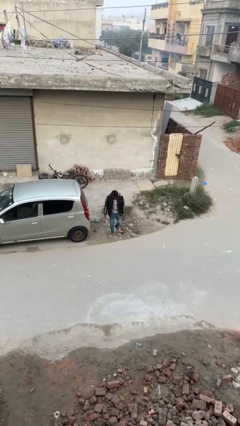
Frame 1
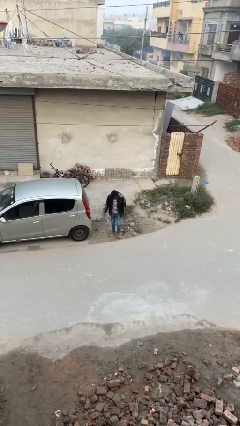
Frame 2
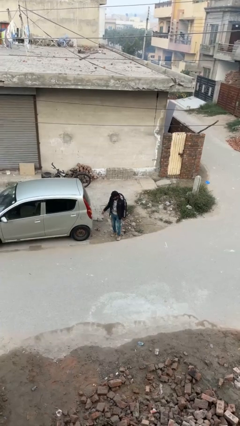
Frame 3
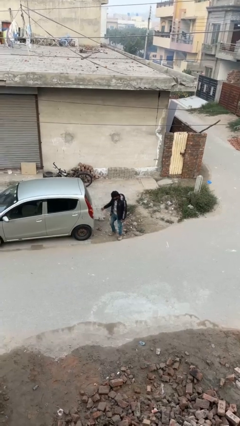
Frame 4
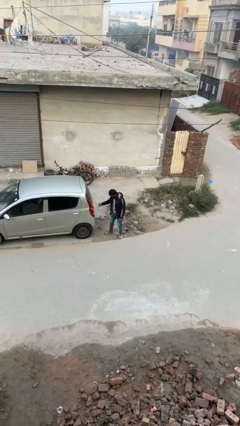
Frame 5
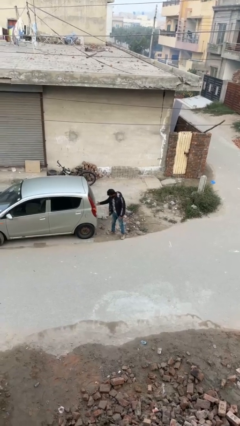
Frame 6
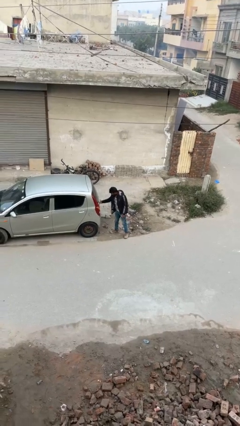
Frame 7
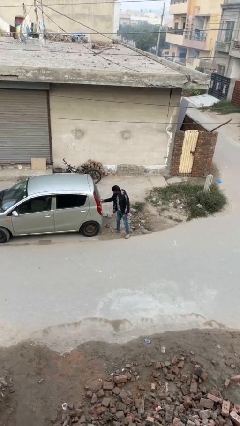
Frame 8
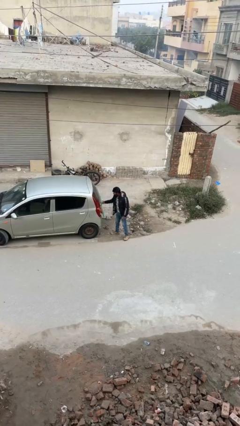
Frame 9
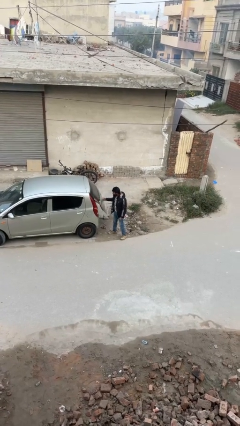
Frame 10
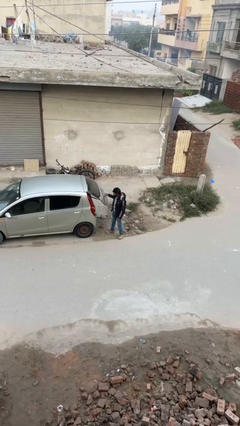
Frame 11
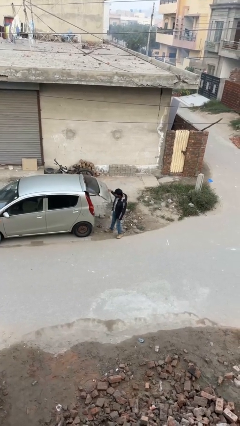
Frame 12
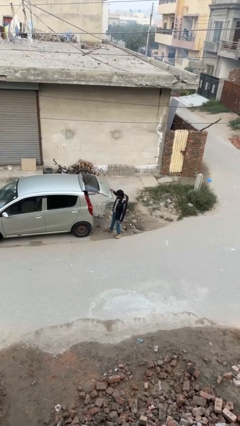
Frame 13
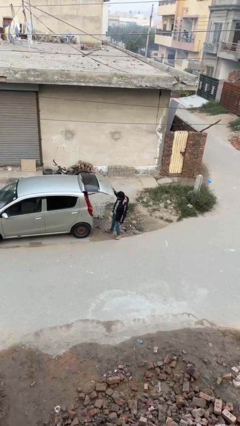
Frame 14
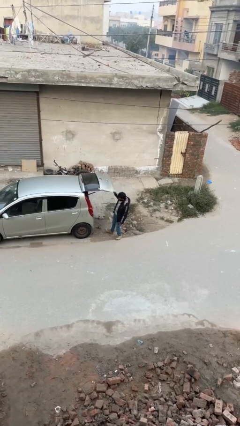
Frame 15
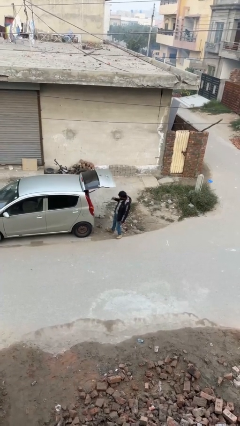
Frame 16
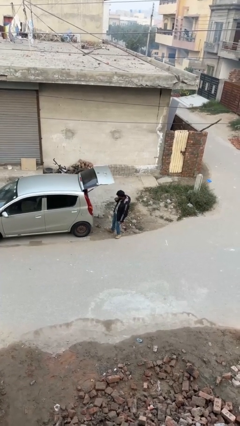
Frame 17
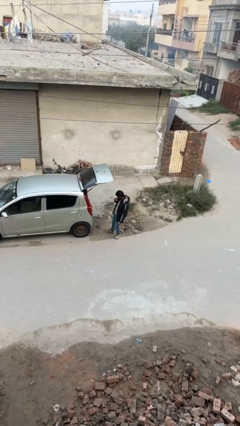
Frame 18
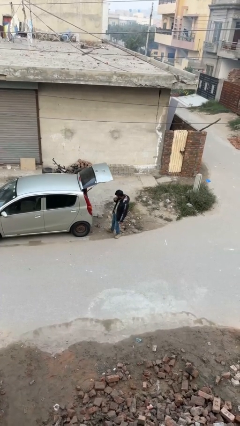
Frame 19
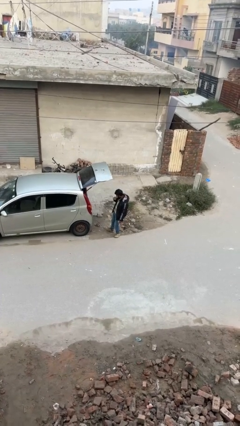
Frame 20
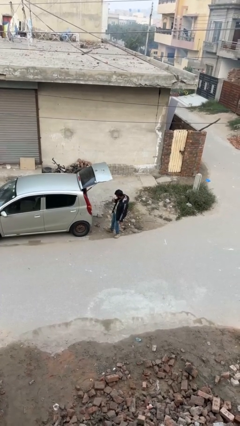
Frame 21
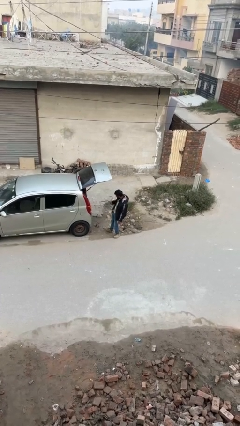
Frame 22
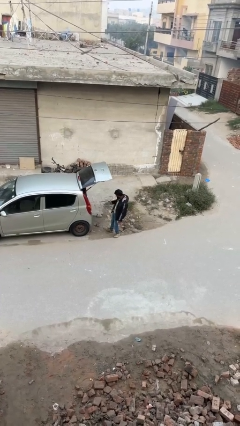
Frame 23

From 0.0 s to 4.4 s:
person opens car trunk

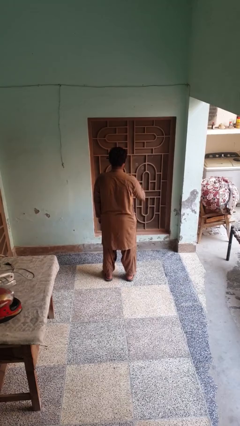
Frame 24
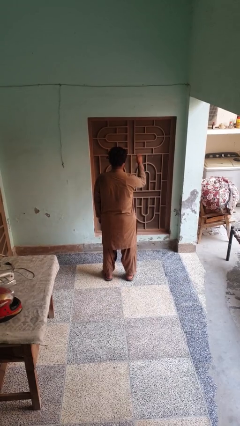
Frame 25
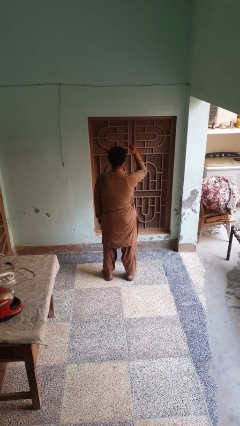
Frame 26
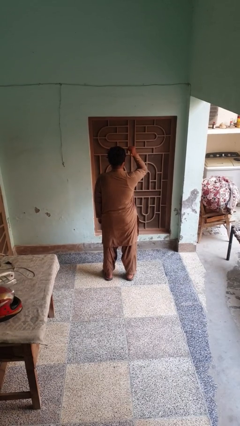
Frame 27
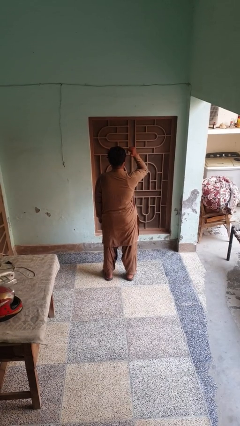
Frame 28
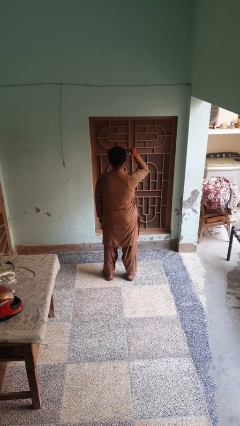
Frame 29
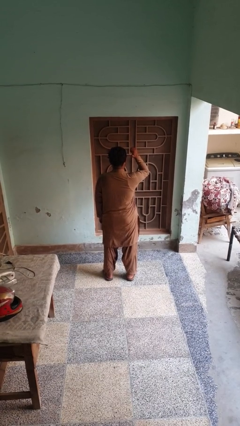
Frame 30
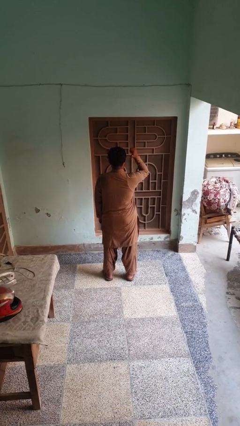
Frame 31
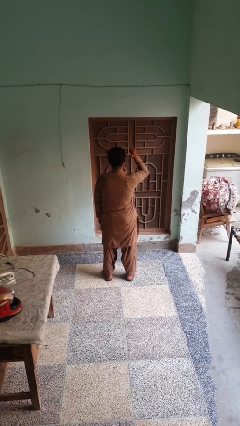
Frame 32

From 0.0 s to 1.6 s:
person gestures behind me

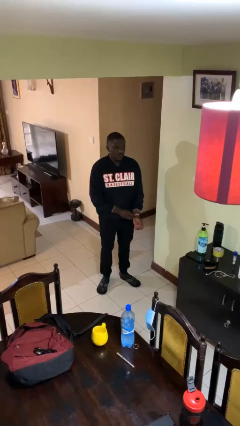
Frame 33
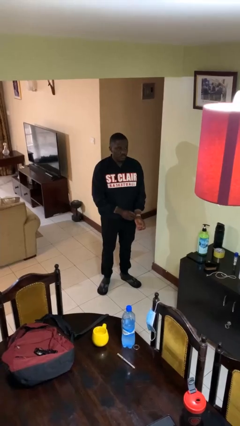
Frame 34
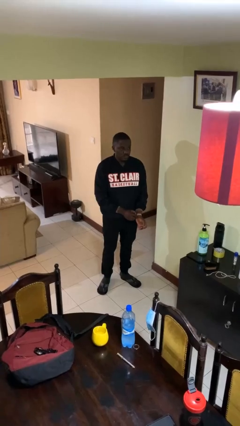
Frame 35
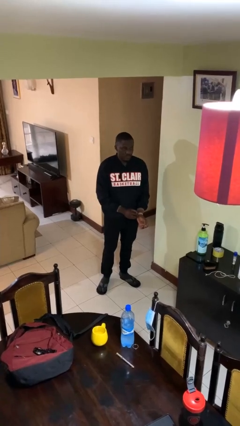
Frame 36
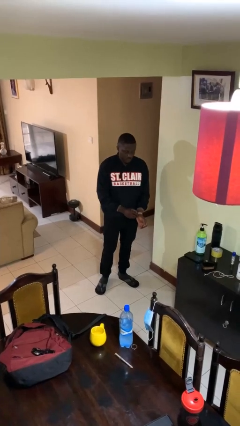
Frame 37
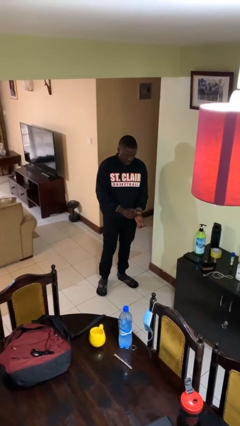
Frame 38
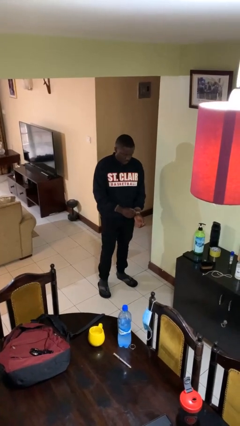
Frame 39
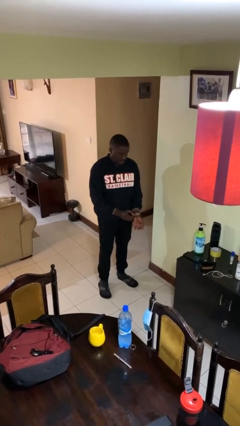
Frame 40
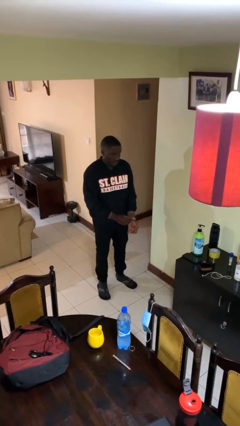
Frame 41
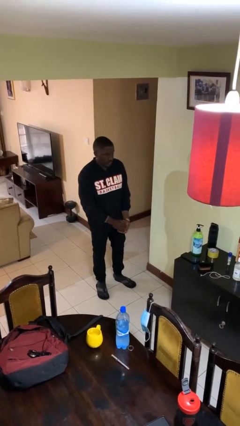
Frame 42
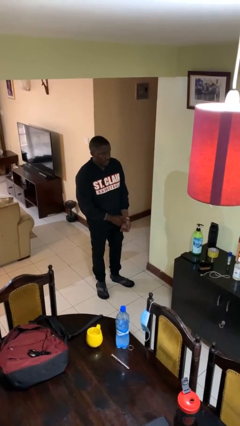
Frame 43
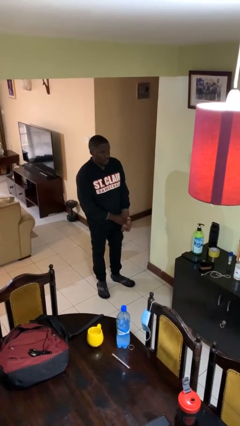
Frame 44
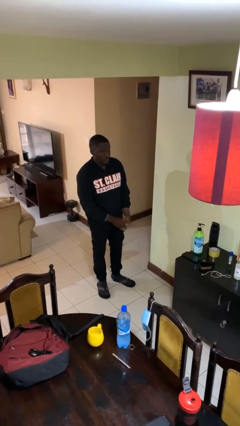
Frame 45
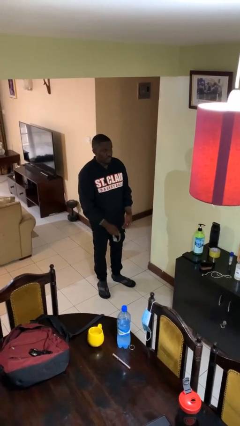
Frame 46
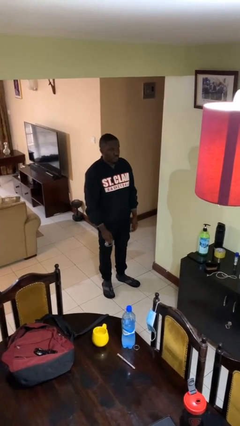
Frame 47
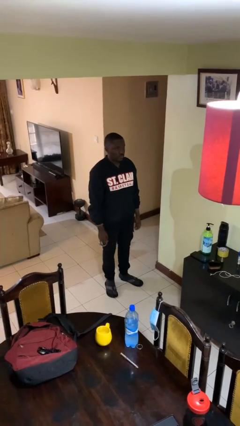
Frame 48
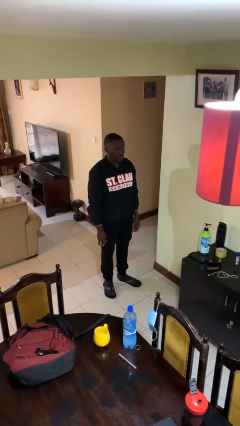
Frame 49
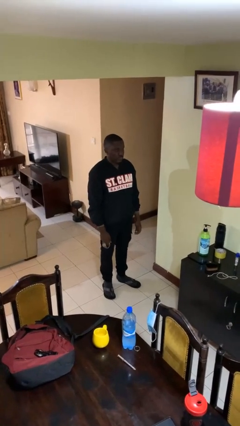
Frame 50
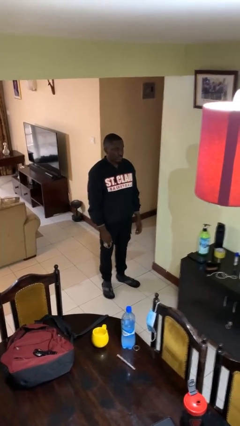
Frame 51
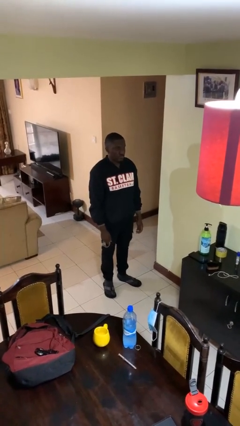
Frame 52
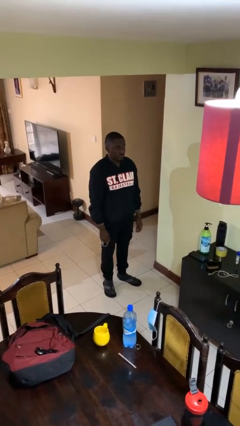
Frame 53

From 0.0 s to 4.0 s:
person takes off wristwatch

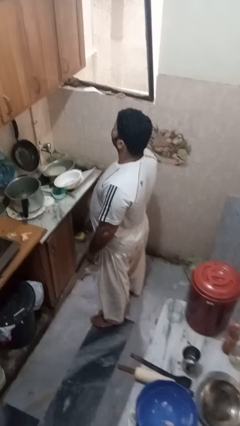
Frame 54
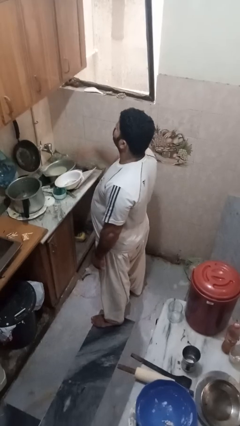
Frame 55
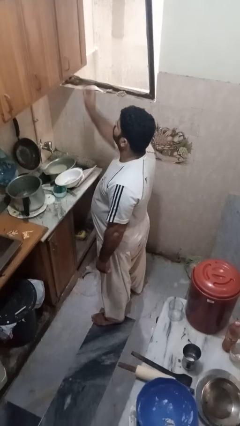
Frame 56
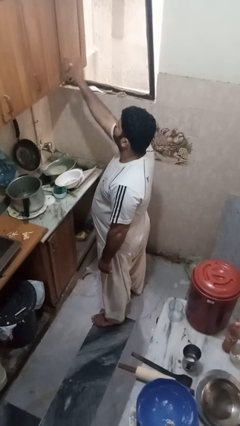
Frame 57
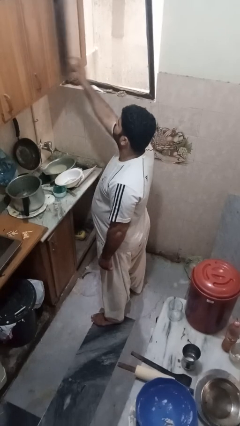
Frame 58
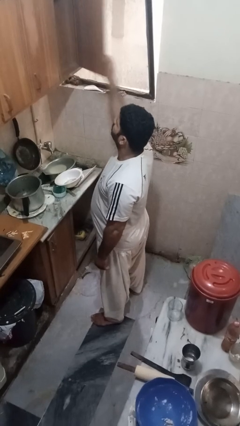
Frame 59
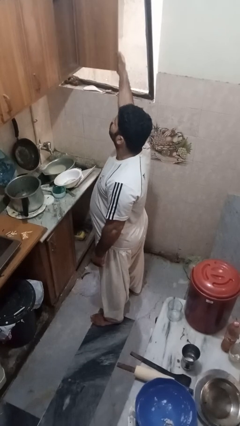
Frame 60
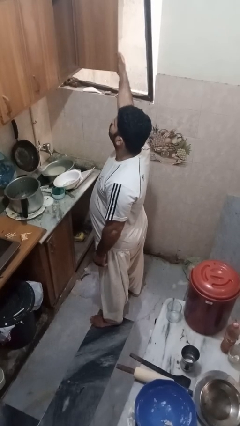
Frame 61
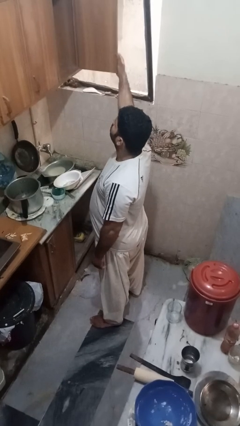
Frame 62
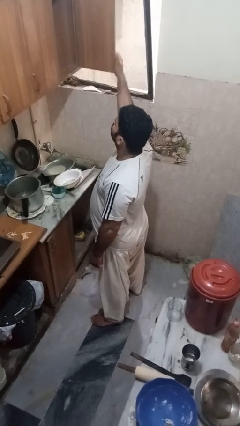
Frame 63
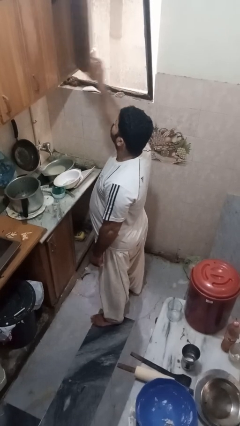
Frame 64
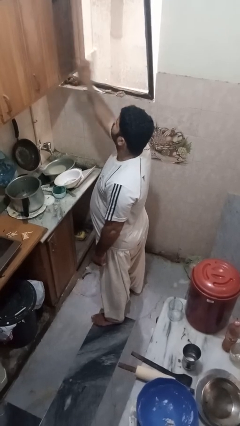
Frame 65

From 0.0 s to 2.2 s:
person opens cabinet

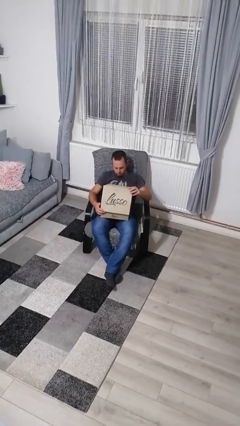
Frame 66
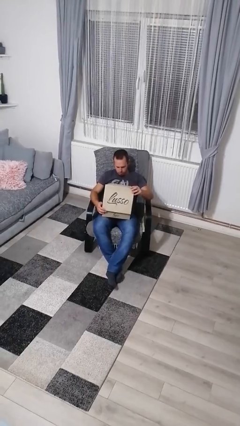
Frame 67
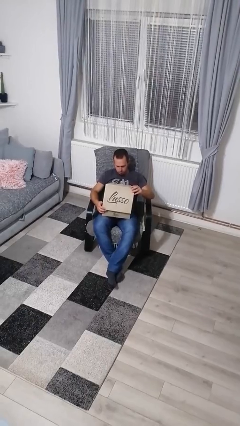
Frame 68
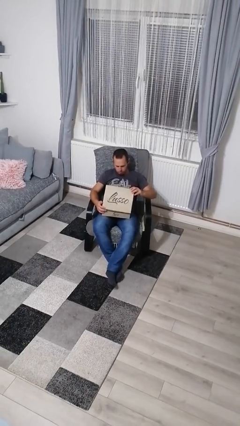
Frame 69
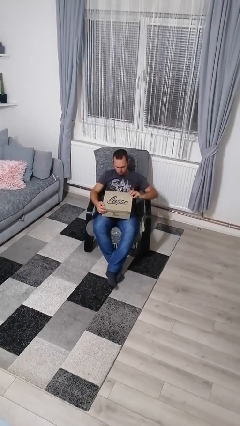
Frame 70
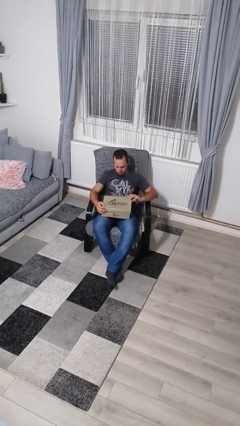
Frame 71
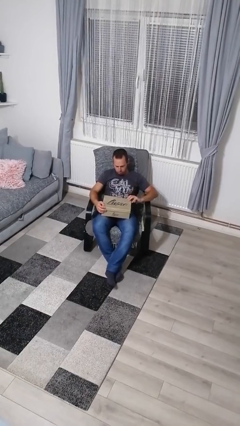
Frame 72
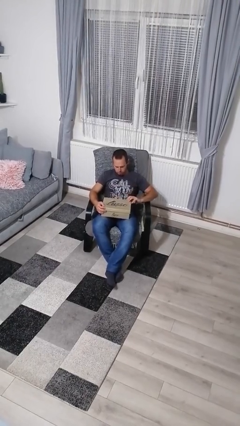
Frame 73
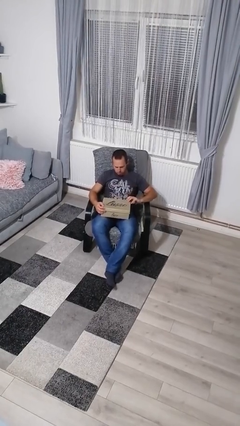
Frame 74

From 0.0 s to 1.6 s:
person closes box

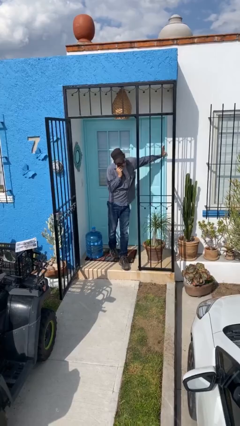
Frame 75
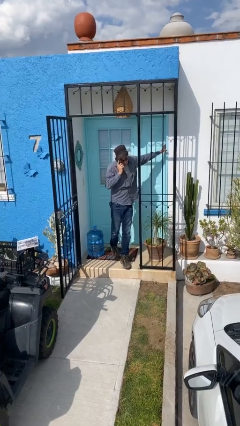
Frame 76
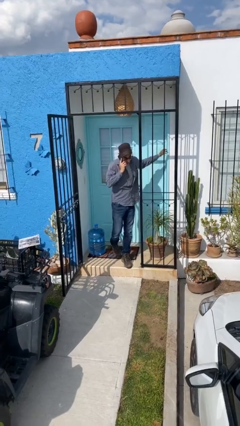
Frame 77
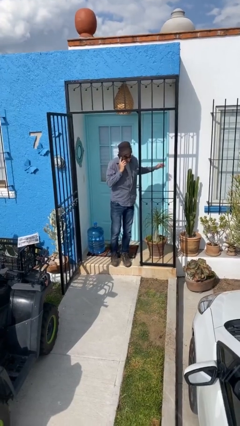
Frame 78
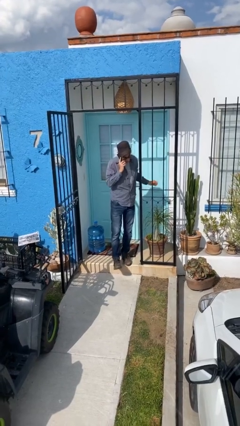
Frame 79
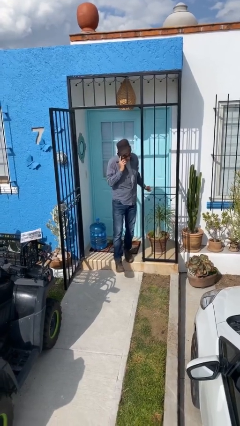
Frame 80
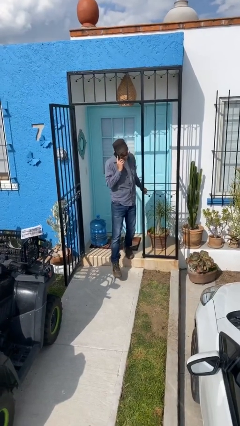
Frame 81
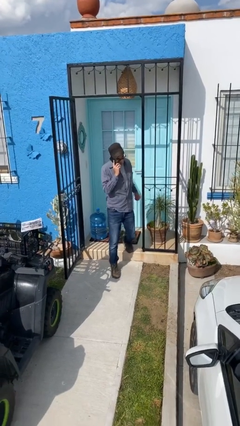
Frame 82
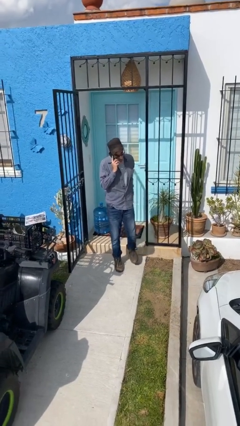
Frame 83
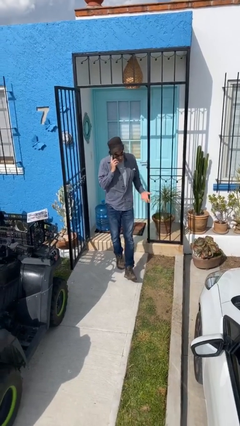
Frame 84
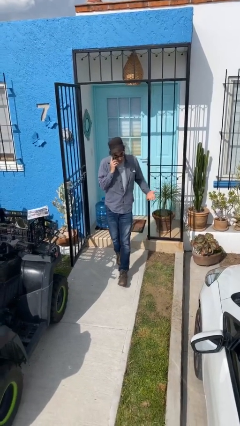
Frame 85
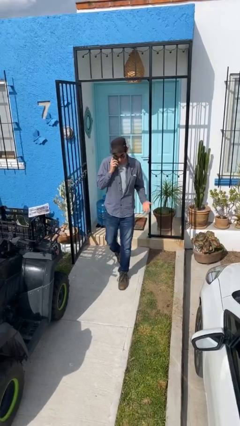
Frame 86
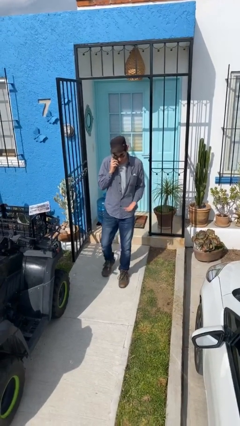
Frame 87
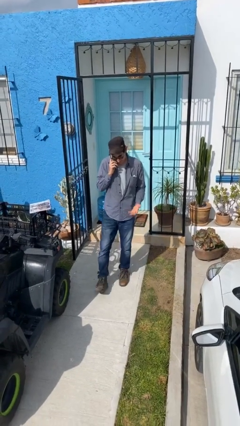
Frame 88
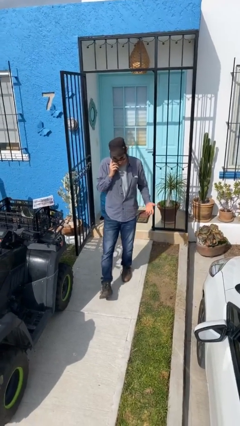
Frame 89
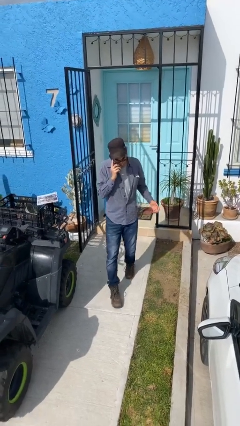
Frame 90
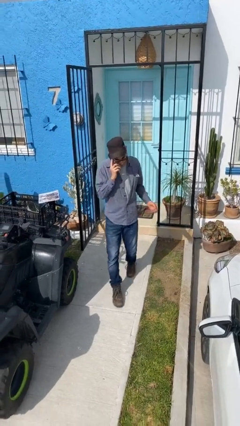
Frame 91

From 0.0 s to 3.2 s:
person enters scene through structure
